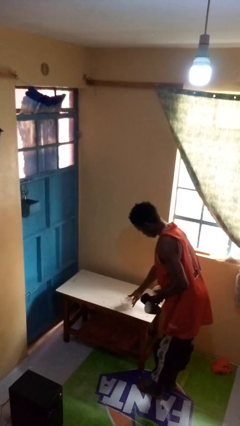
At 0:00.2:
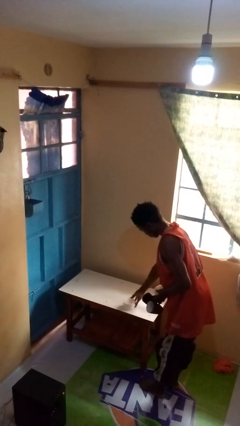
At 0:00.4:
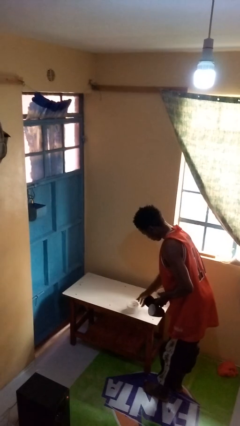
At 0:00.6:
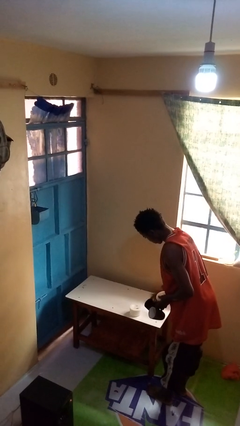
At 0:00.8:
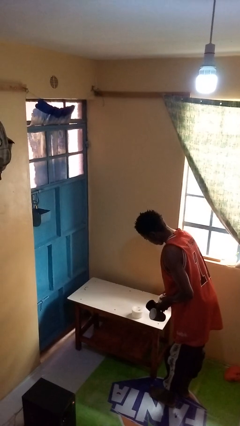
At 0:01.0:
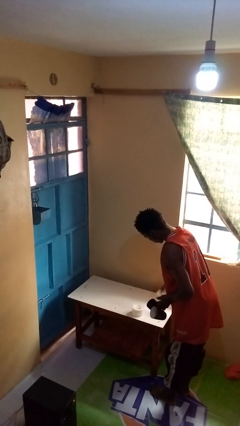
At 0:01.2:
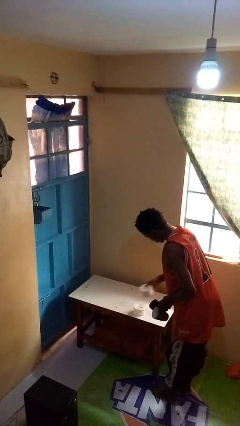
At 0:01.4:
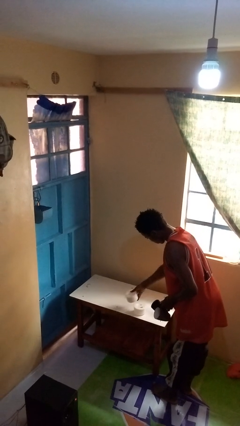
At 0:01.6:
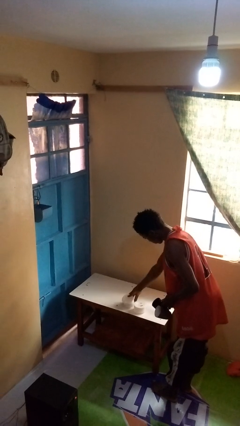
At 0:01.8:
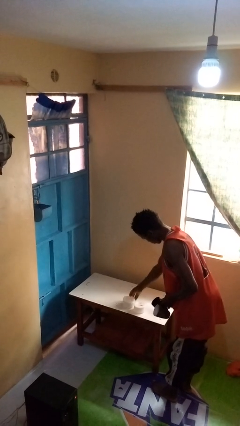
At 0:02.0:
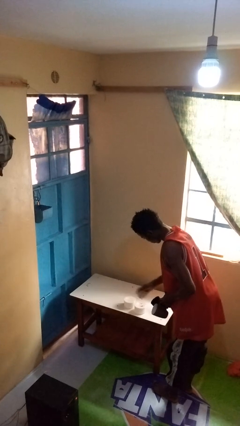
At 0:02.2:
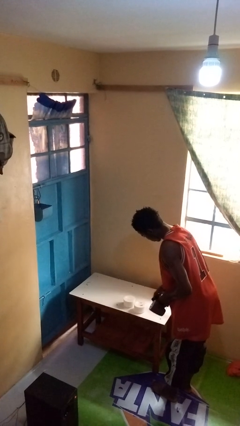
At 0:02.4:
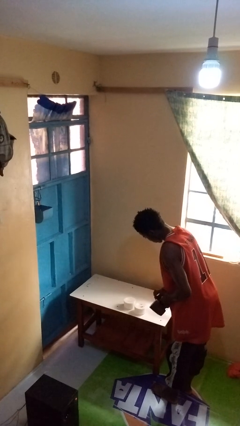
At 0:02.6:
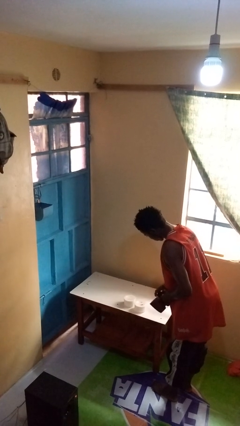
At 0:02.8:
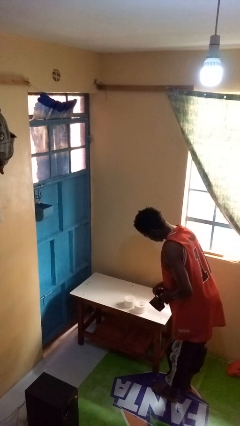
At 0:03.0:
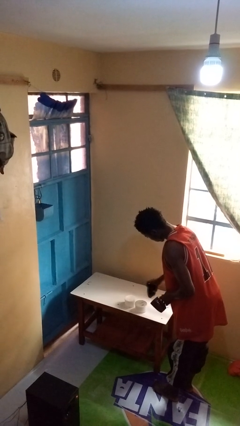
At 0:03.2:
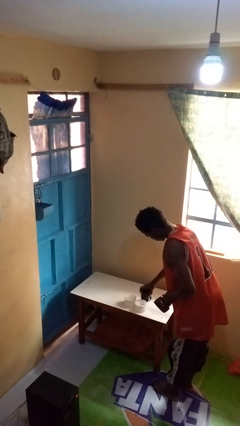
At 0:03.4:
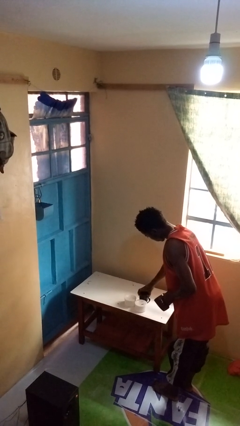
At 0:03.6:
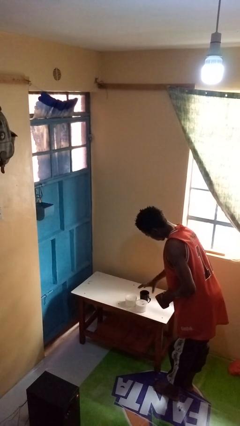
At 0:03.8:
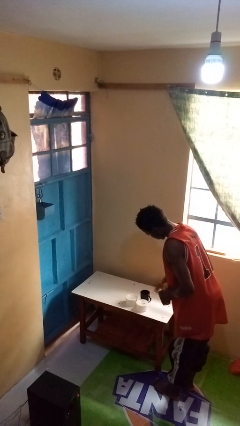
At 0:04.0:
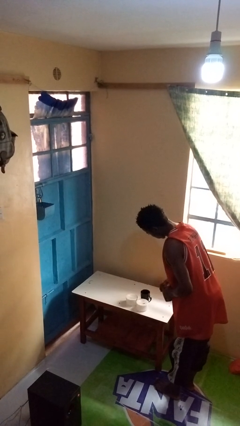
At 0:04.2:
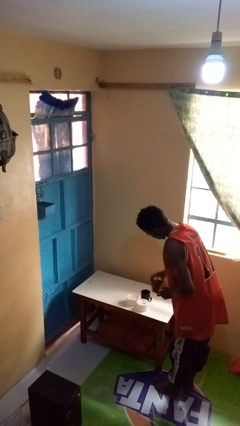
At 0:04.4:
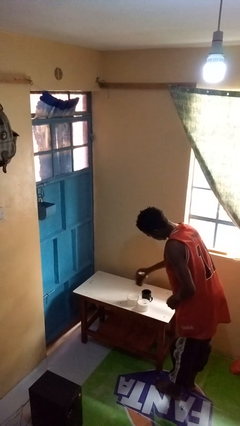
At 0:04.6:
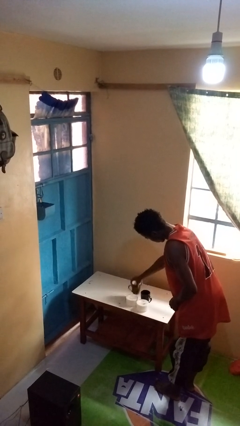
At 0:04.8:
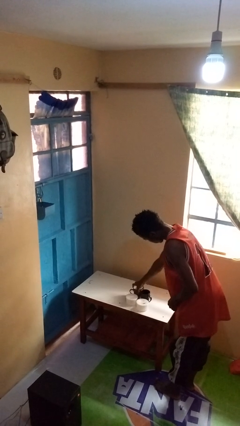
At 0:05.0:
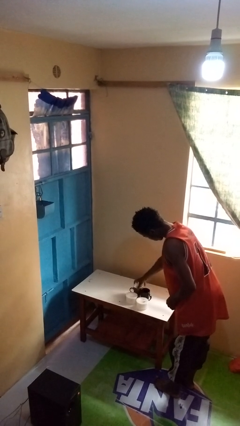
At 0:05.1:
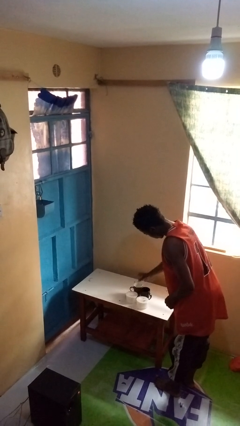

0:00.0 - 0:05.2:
person sets table

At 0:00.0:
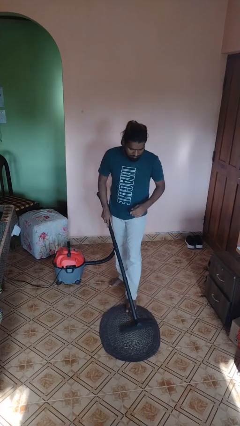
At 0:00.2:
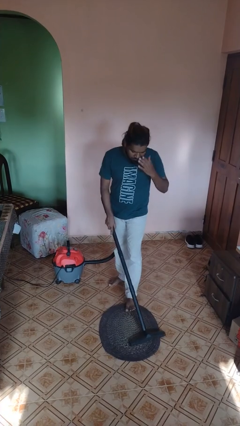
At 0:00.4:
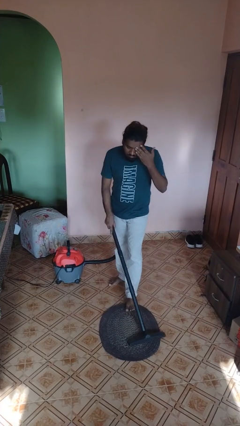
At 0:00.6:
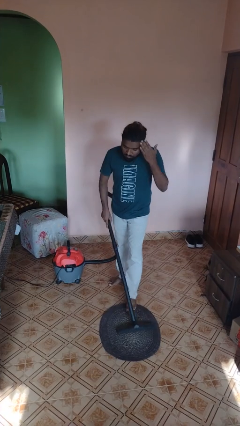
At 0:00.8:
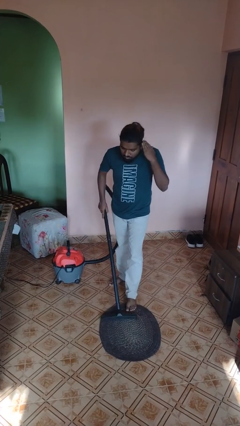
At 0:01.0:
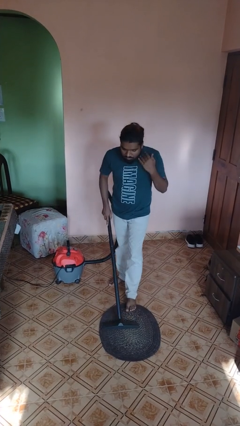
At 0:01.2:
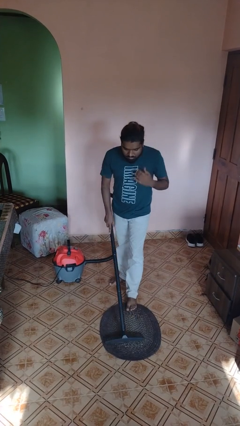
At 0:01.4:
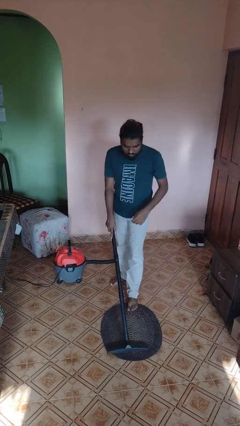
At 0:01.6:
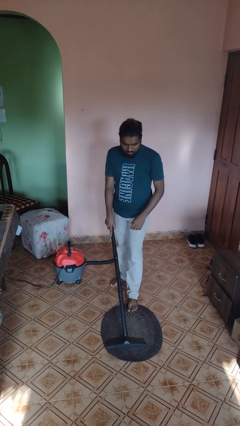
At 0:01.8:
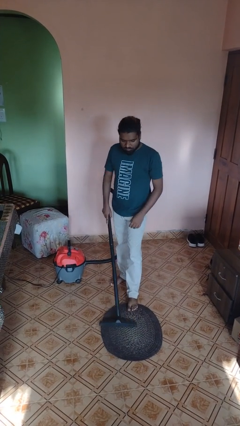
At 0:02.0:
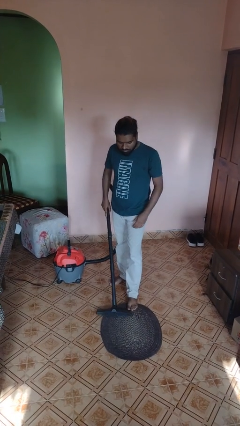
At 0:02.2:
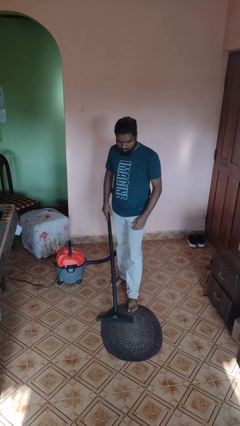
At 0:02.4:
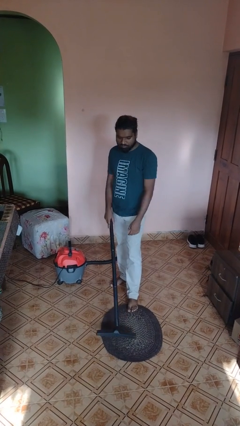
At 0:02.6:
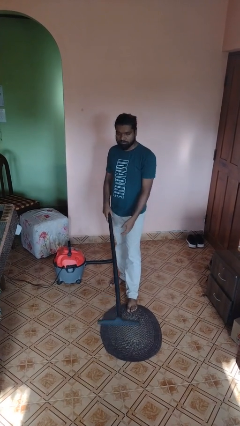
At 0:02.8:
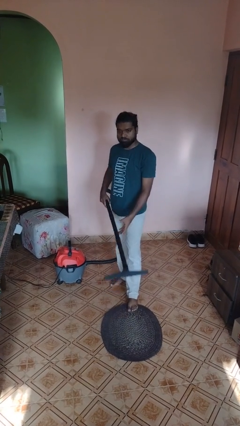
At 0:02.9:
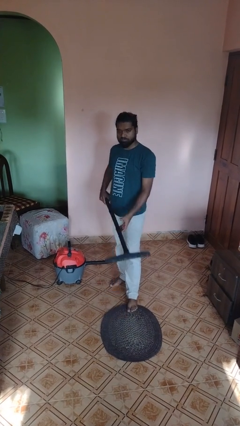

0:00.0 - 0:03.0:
person vacuums carpet

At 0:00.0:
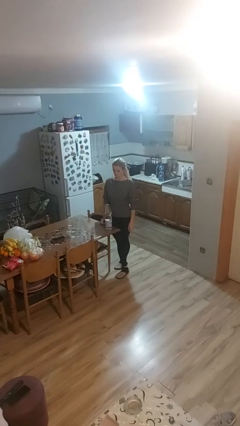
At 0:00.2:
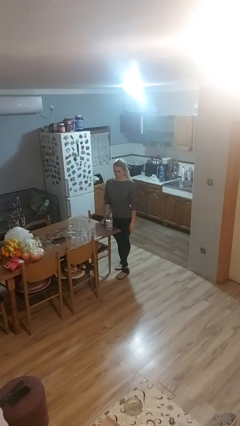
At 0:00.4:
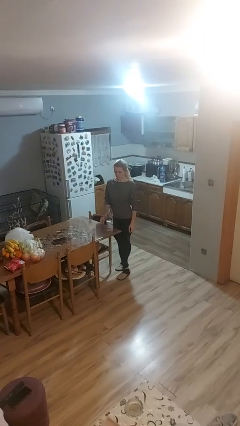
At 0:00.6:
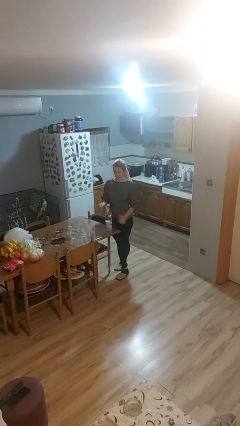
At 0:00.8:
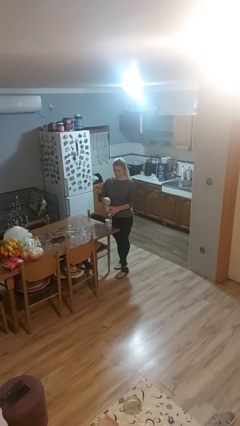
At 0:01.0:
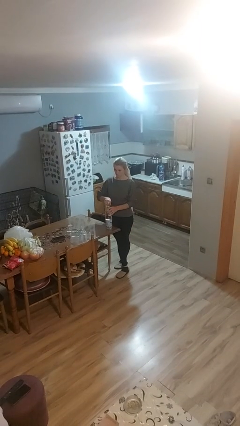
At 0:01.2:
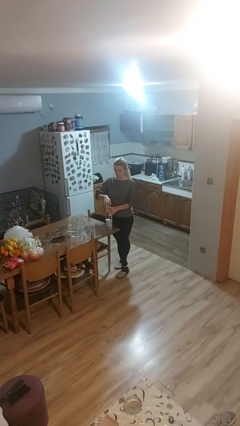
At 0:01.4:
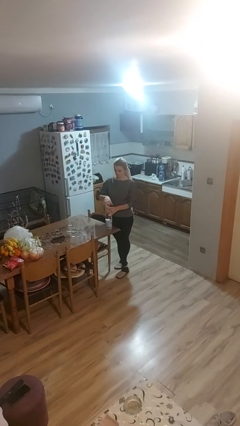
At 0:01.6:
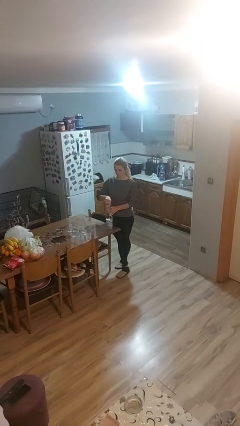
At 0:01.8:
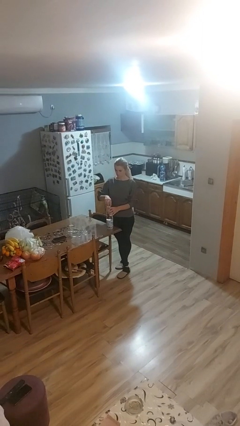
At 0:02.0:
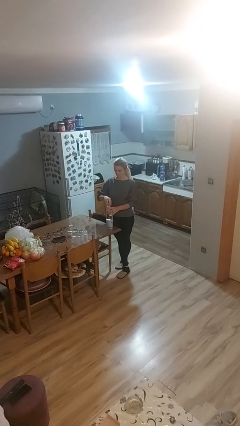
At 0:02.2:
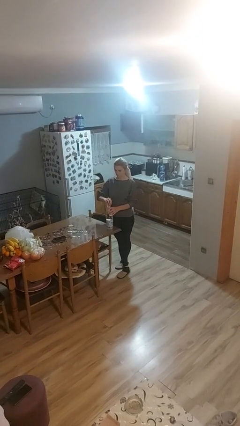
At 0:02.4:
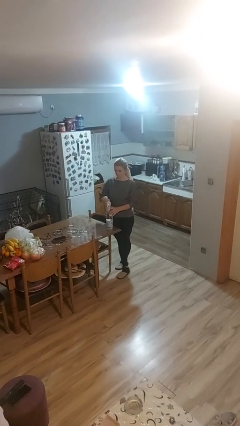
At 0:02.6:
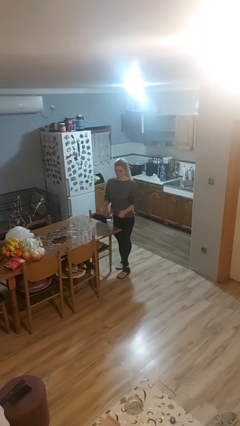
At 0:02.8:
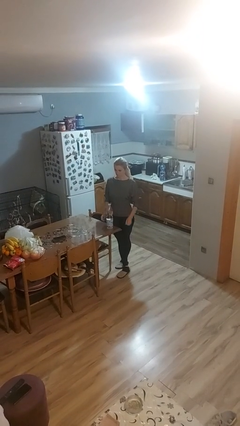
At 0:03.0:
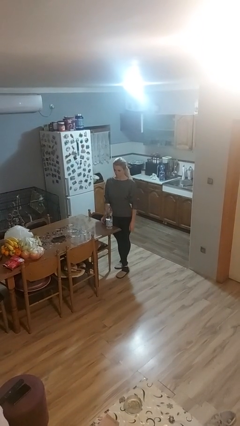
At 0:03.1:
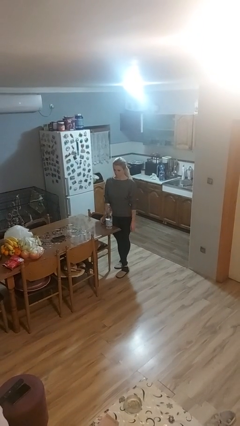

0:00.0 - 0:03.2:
person unscrews lid from bottle

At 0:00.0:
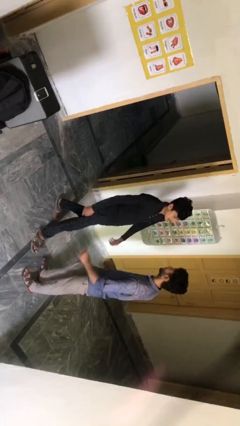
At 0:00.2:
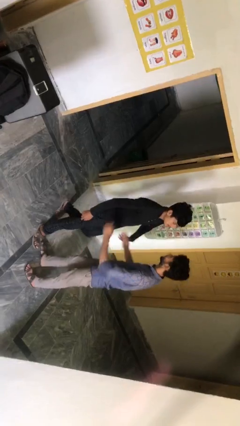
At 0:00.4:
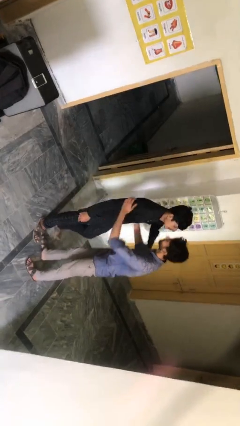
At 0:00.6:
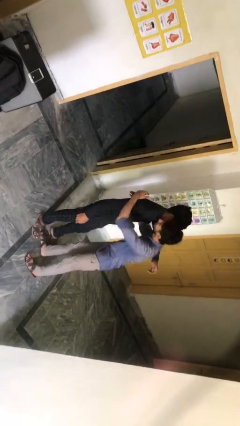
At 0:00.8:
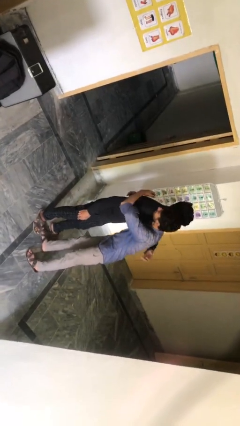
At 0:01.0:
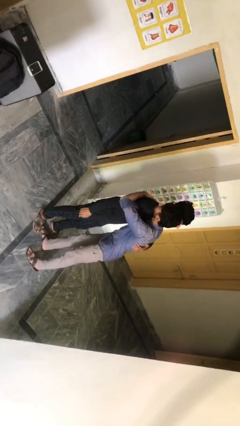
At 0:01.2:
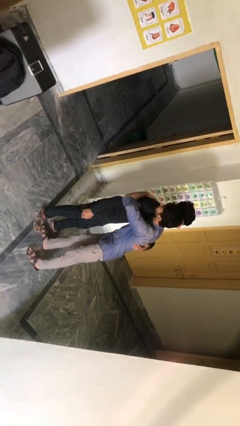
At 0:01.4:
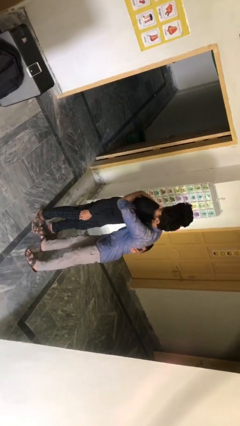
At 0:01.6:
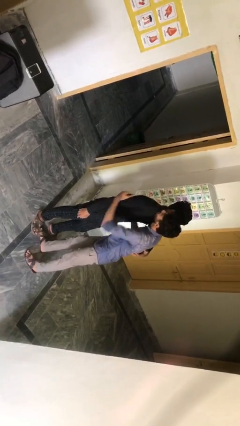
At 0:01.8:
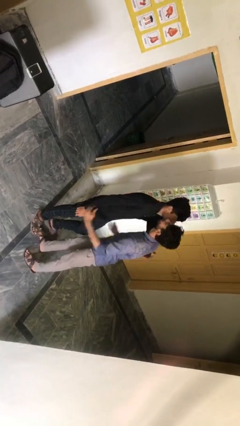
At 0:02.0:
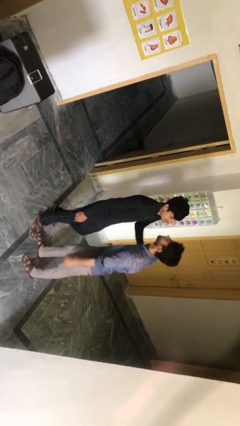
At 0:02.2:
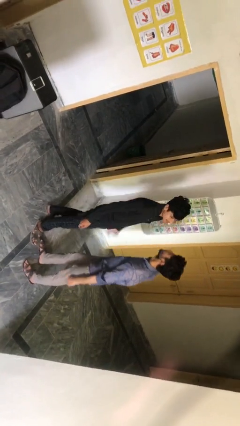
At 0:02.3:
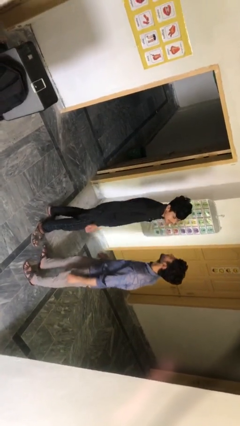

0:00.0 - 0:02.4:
person embraces person

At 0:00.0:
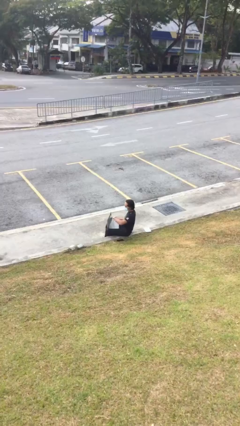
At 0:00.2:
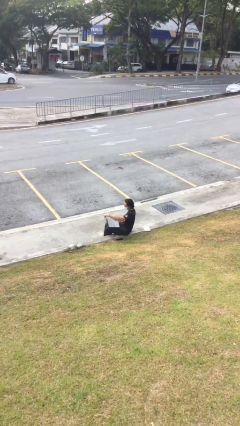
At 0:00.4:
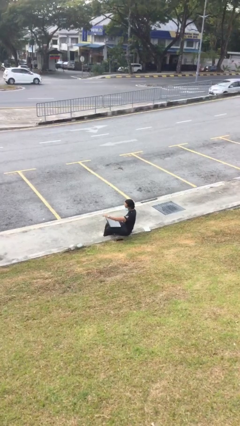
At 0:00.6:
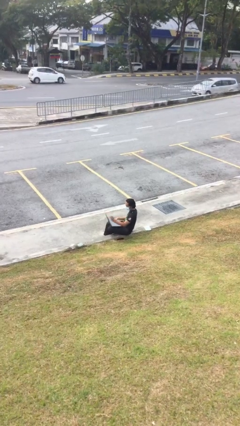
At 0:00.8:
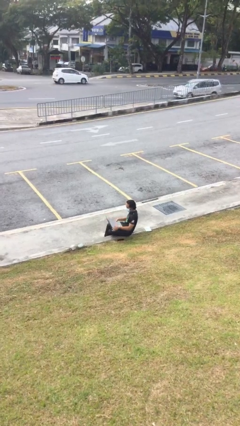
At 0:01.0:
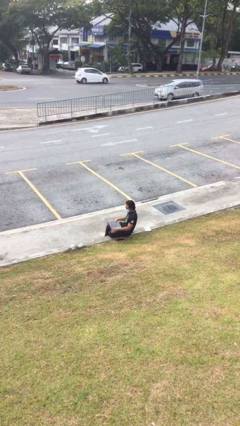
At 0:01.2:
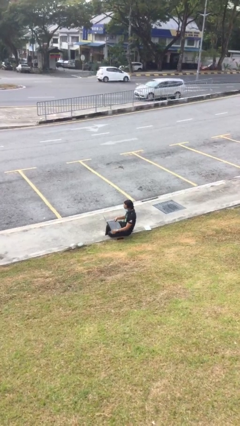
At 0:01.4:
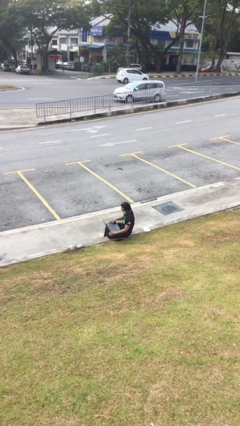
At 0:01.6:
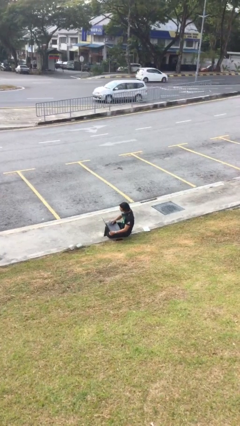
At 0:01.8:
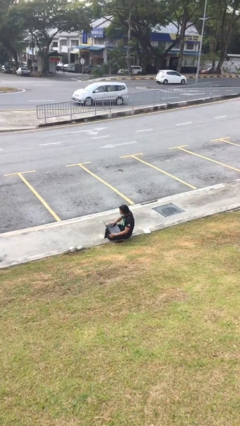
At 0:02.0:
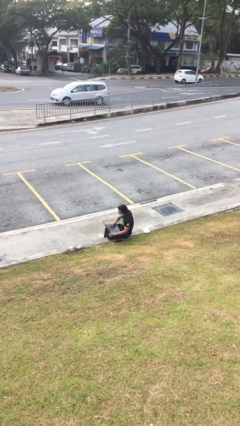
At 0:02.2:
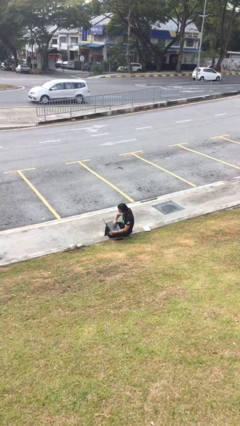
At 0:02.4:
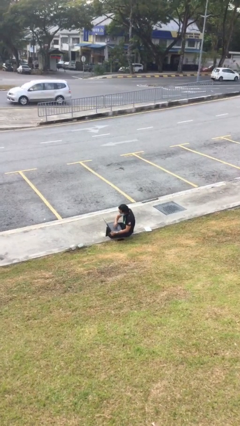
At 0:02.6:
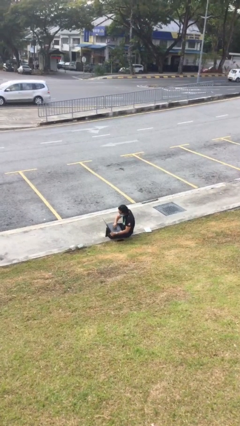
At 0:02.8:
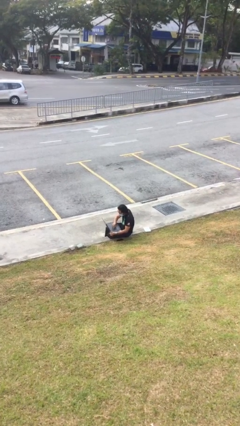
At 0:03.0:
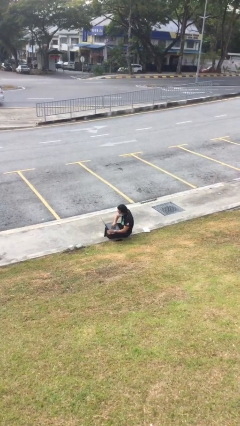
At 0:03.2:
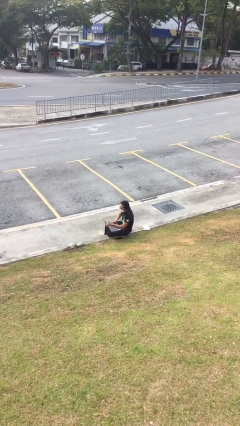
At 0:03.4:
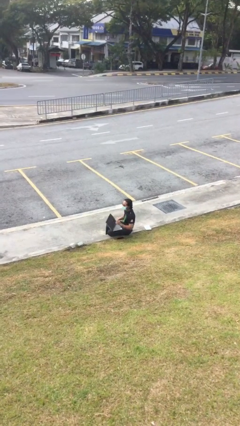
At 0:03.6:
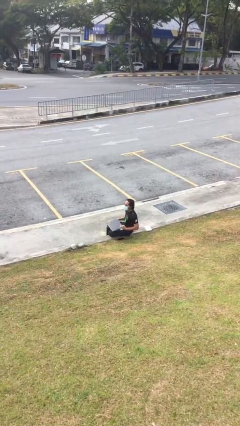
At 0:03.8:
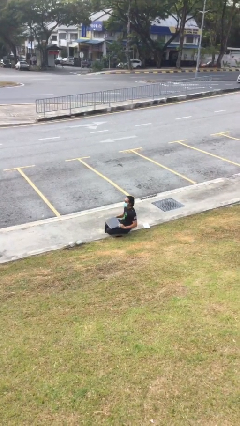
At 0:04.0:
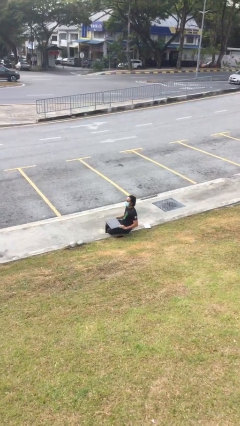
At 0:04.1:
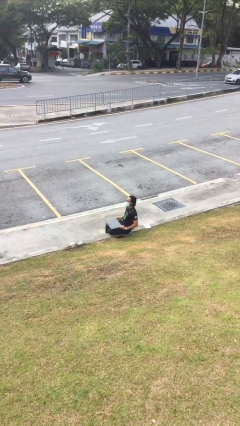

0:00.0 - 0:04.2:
person interacts with laptop
